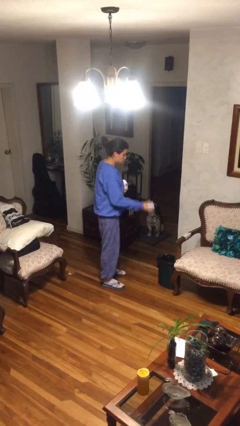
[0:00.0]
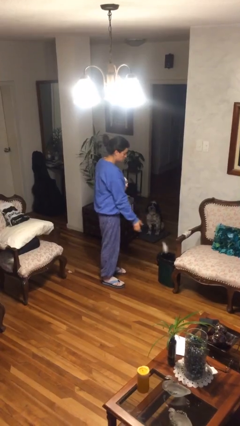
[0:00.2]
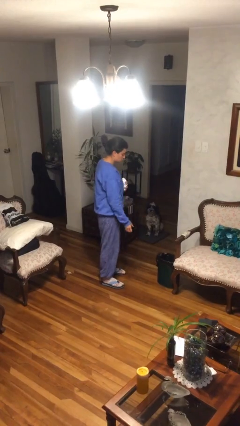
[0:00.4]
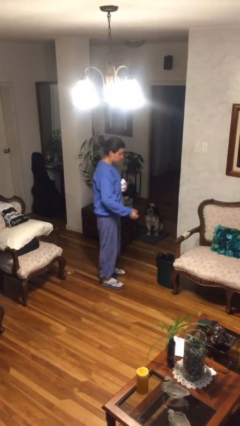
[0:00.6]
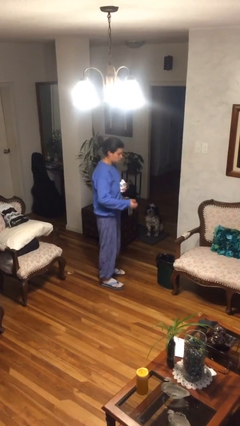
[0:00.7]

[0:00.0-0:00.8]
person discards trash

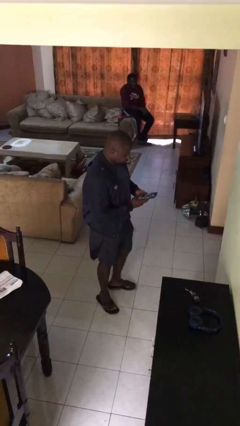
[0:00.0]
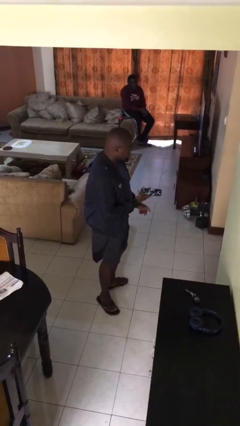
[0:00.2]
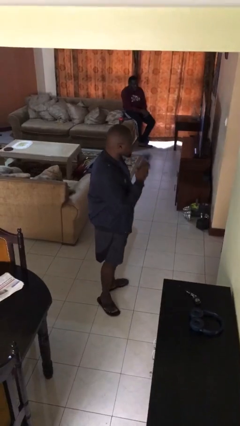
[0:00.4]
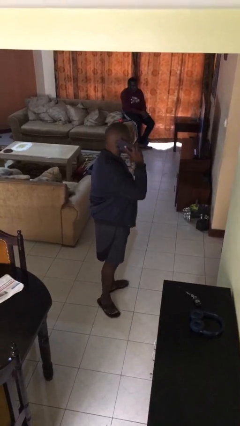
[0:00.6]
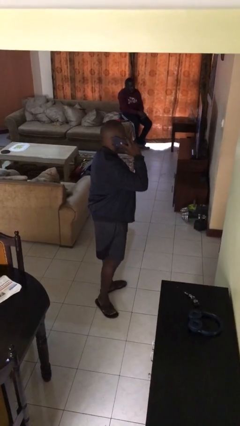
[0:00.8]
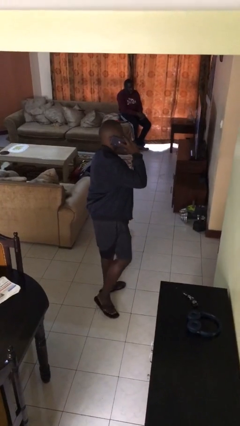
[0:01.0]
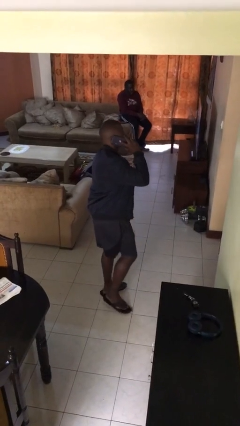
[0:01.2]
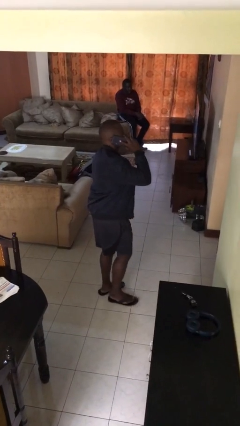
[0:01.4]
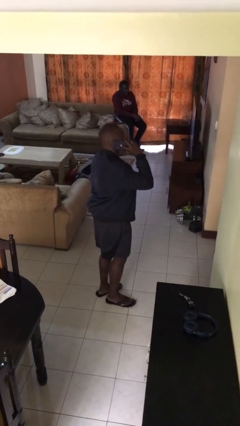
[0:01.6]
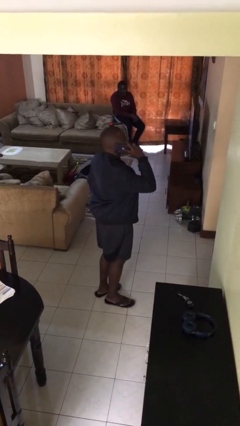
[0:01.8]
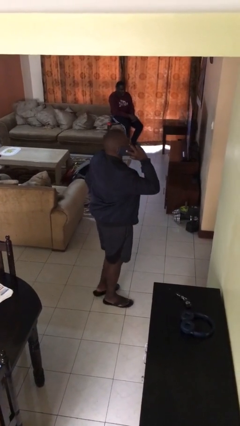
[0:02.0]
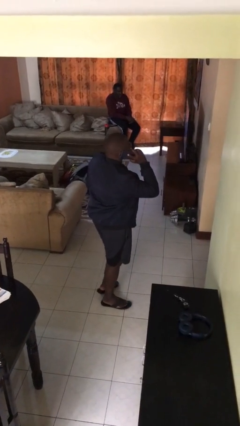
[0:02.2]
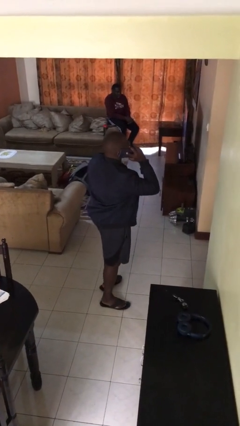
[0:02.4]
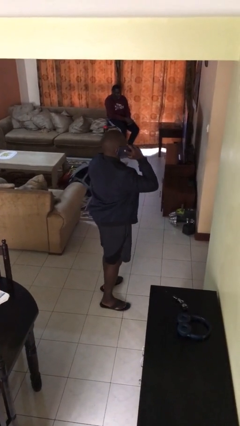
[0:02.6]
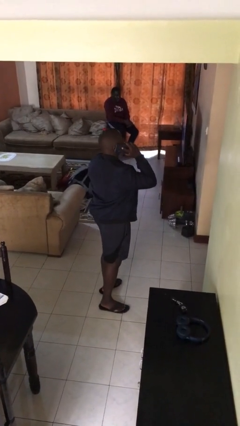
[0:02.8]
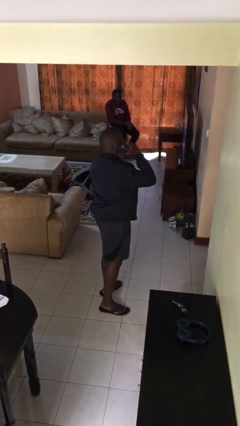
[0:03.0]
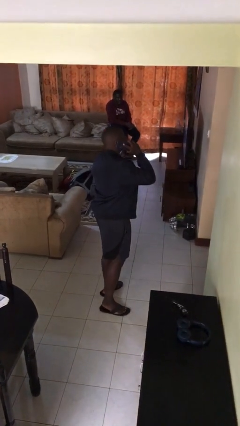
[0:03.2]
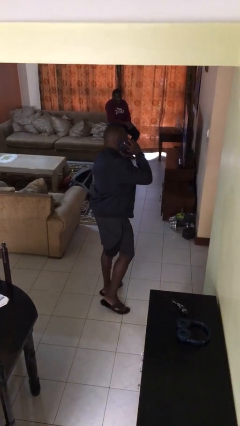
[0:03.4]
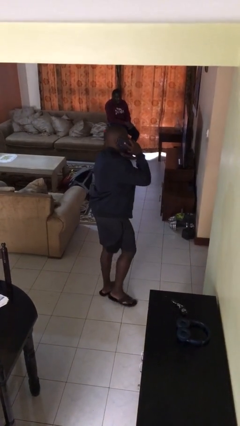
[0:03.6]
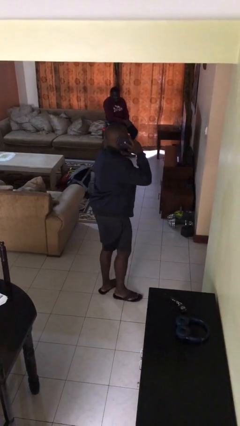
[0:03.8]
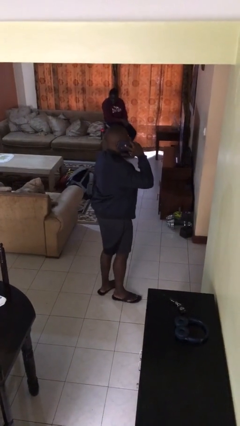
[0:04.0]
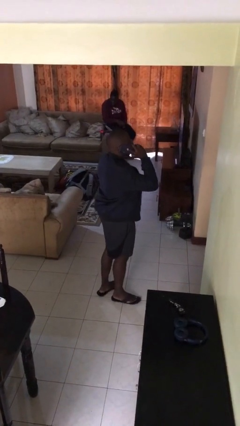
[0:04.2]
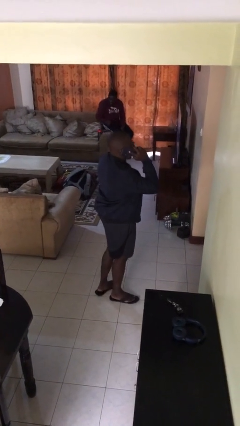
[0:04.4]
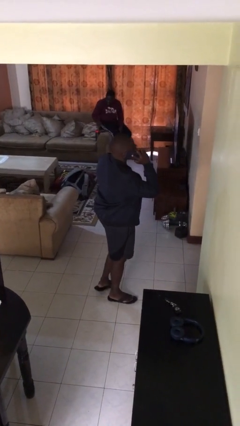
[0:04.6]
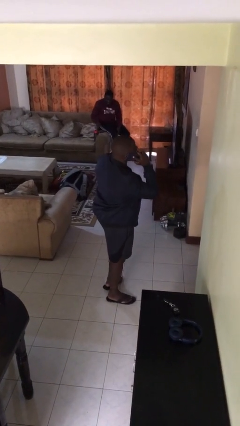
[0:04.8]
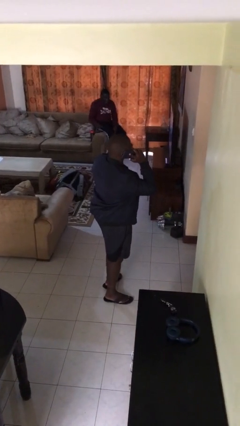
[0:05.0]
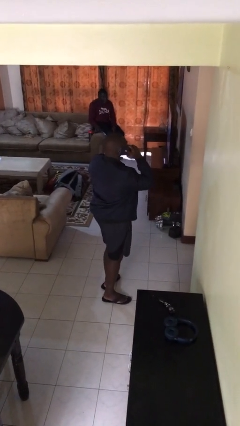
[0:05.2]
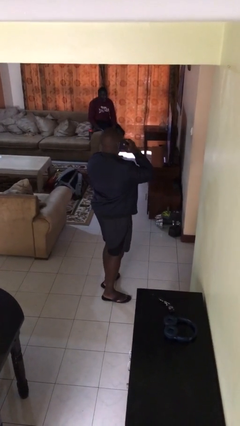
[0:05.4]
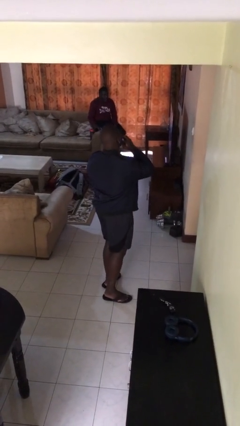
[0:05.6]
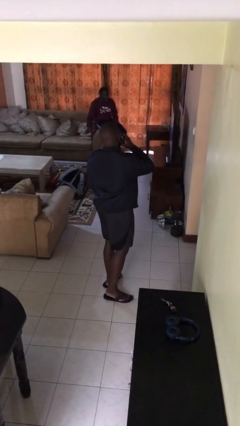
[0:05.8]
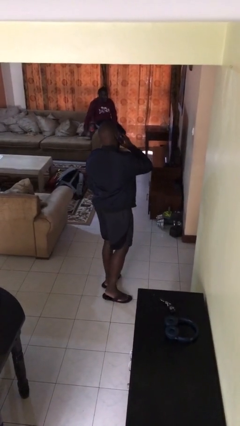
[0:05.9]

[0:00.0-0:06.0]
person talks on phone

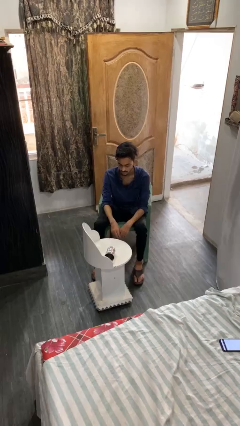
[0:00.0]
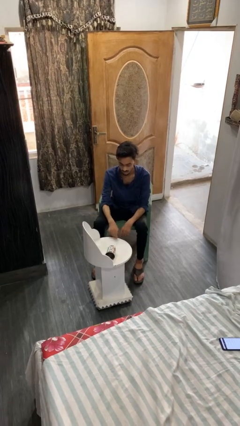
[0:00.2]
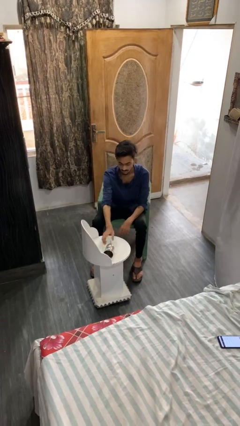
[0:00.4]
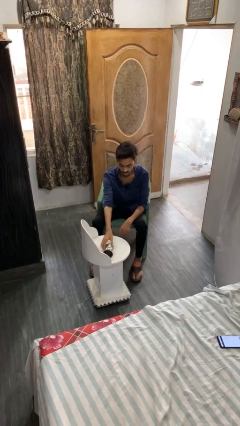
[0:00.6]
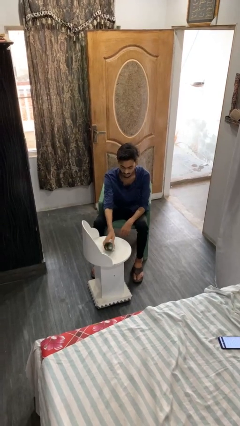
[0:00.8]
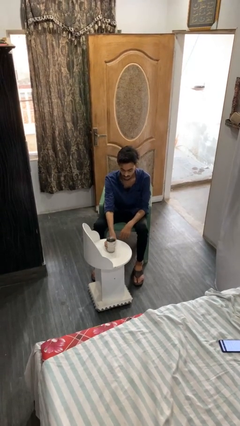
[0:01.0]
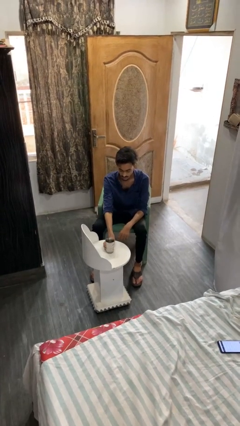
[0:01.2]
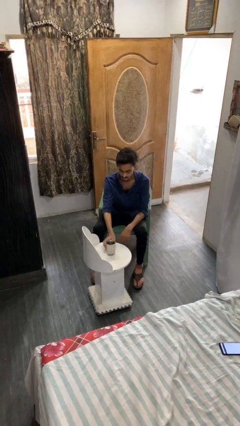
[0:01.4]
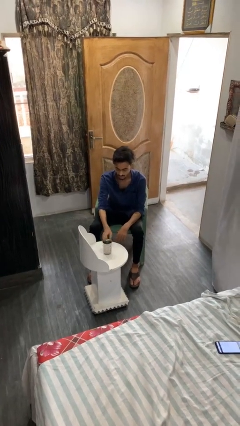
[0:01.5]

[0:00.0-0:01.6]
person sets upright glass

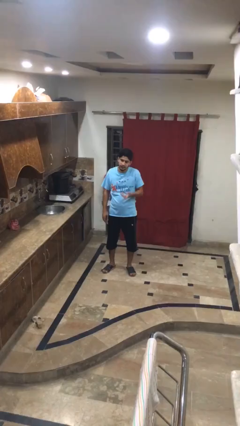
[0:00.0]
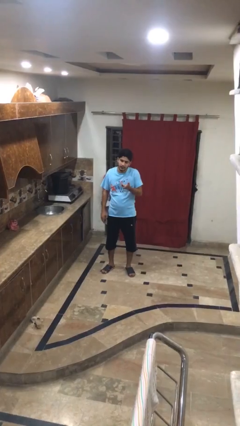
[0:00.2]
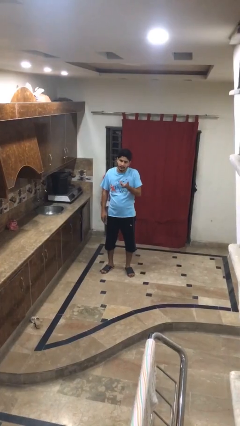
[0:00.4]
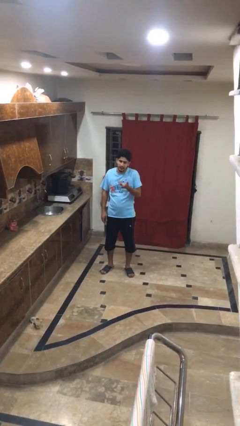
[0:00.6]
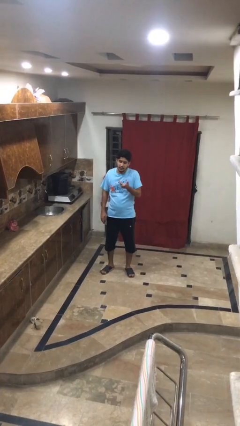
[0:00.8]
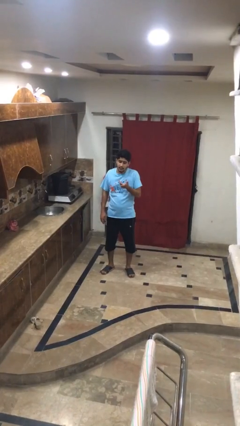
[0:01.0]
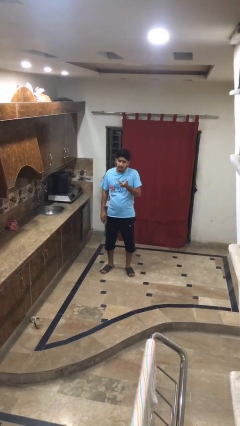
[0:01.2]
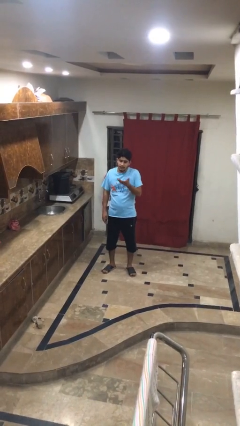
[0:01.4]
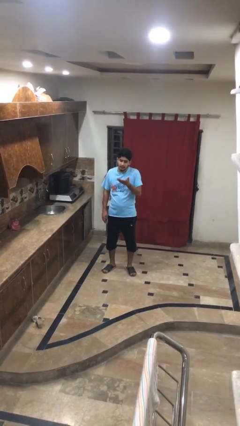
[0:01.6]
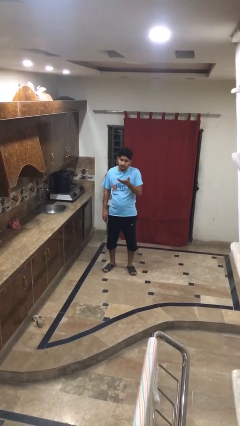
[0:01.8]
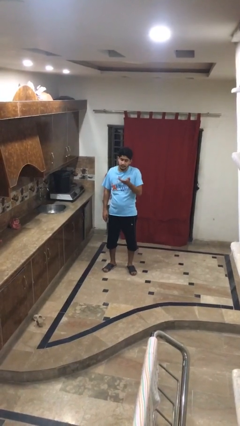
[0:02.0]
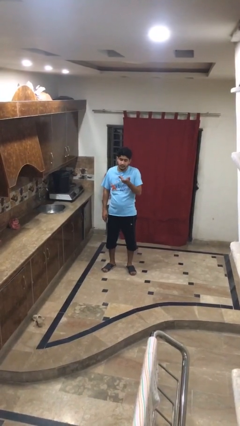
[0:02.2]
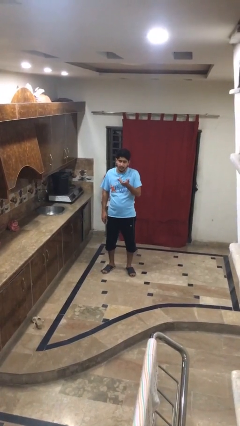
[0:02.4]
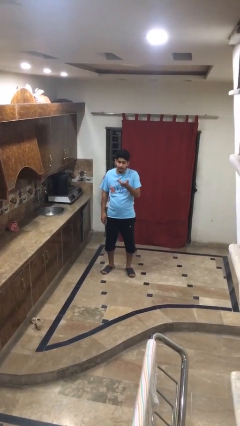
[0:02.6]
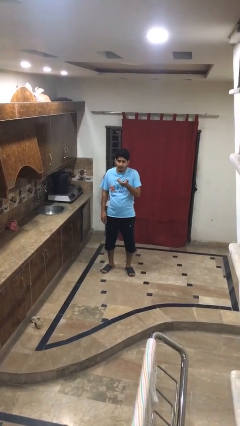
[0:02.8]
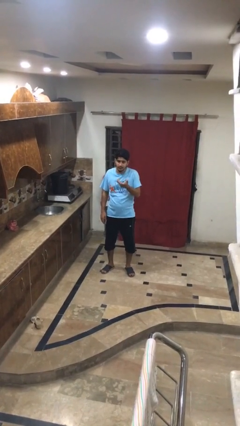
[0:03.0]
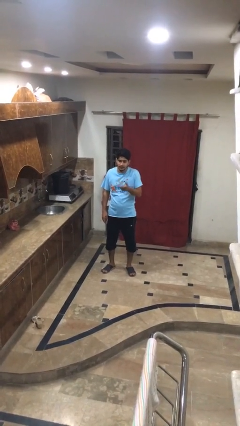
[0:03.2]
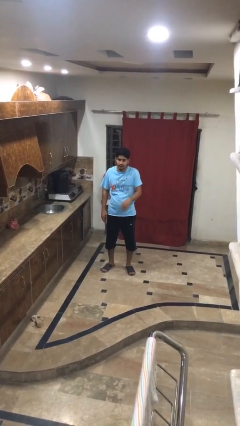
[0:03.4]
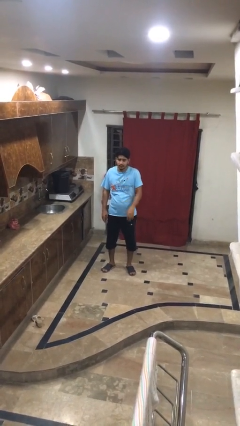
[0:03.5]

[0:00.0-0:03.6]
person shrugs

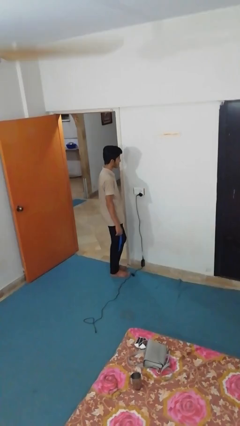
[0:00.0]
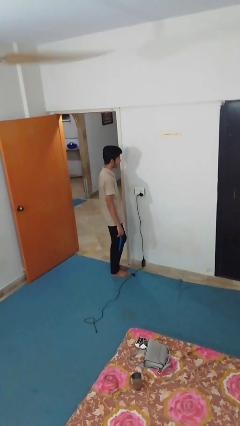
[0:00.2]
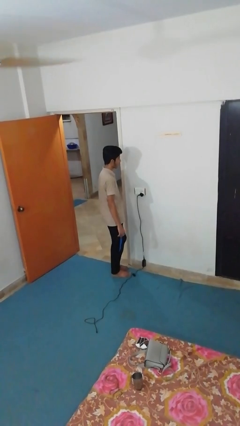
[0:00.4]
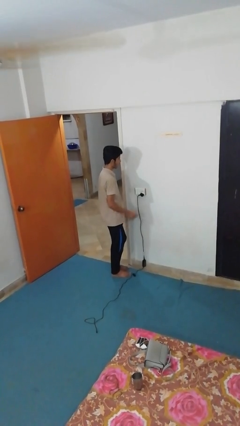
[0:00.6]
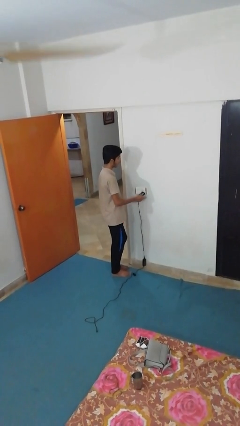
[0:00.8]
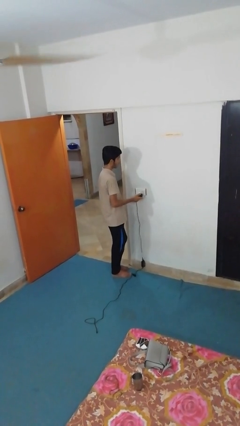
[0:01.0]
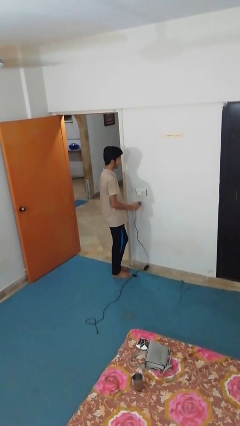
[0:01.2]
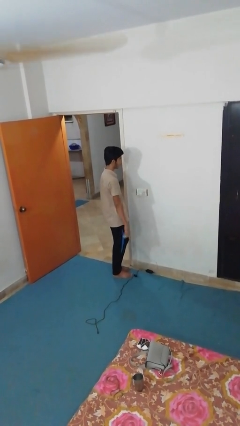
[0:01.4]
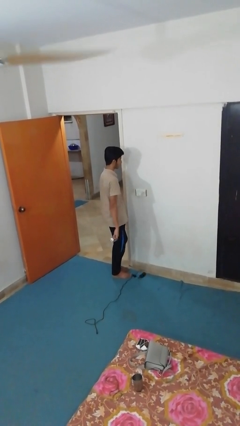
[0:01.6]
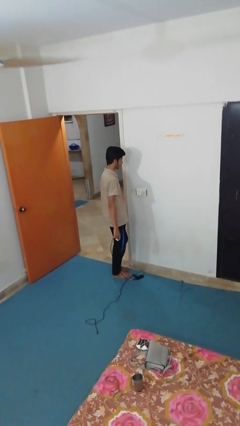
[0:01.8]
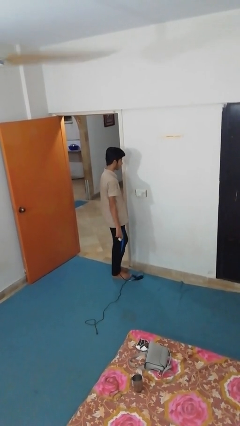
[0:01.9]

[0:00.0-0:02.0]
person unplugs from electrical socket

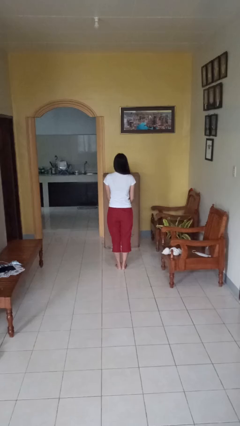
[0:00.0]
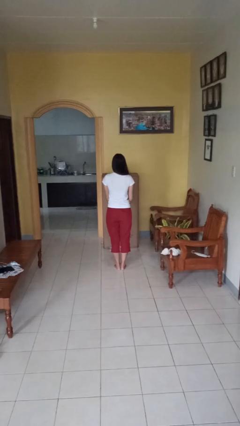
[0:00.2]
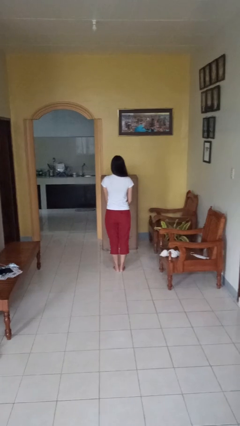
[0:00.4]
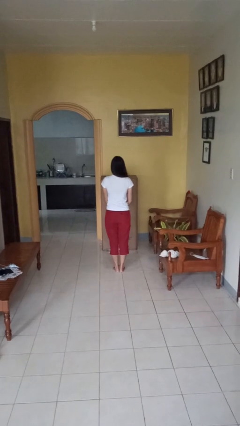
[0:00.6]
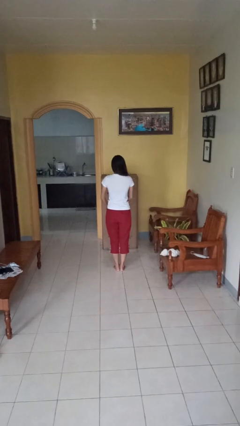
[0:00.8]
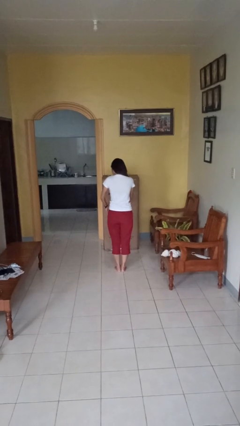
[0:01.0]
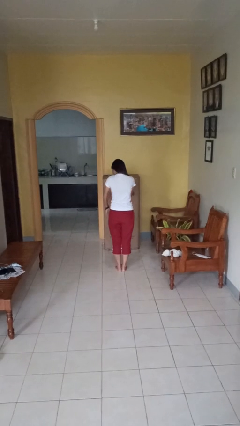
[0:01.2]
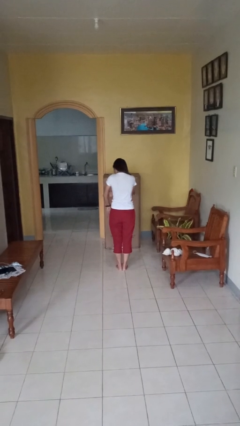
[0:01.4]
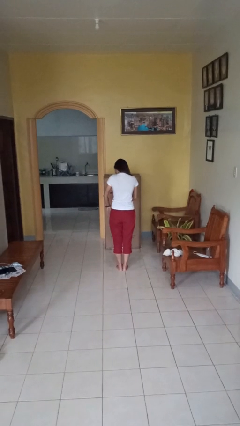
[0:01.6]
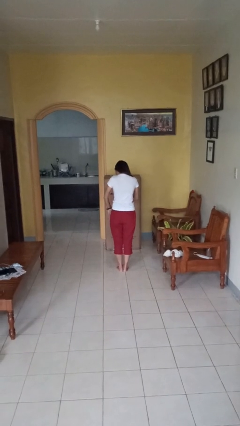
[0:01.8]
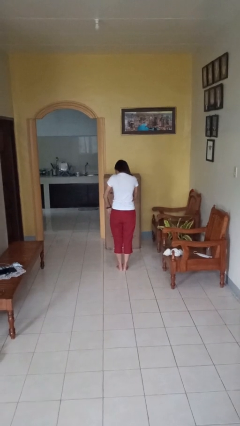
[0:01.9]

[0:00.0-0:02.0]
person swats bug

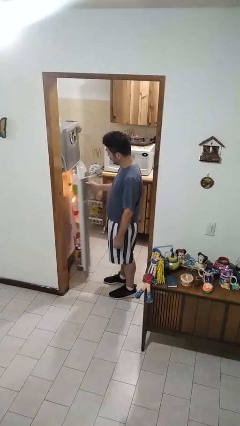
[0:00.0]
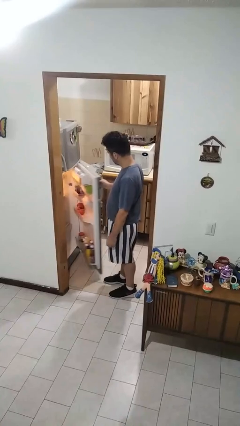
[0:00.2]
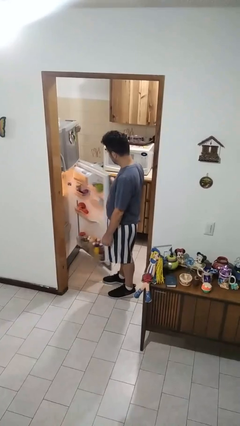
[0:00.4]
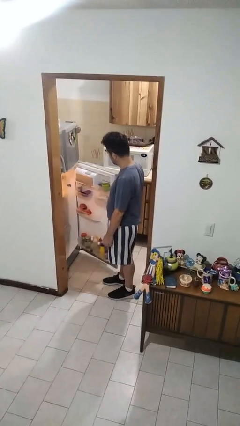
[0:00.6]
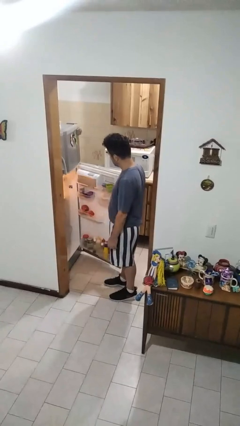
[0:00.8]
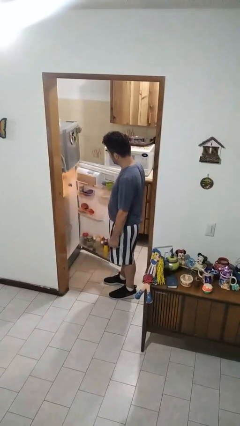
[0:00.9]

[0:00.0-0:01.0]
person opens refrigerator

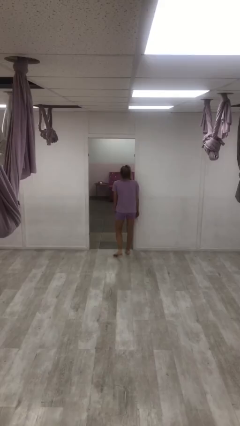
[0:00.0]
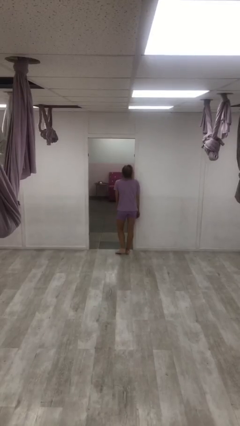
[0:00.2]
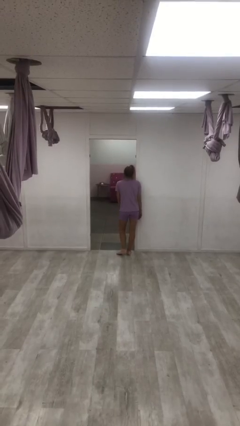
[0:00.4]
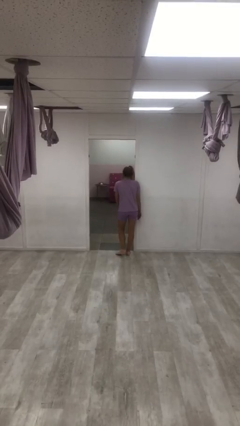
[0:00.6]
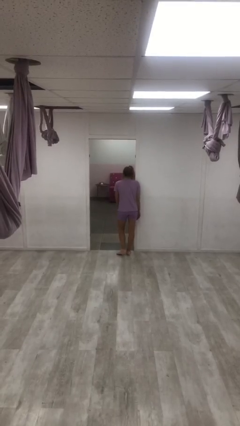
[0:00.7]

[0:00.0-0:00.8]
person bumps into wall
